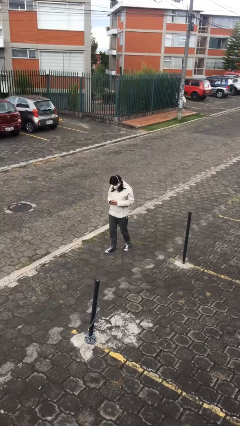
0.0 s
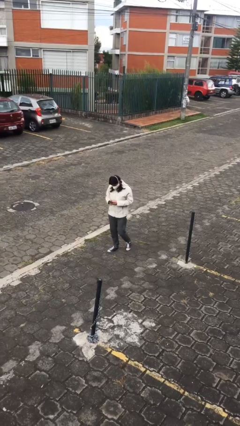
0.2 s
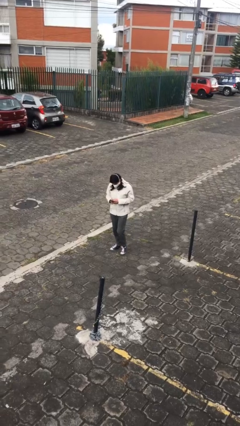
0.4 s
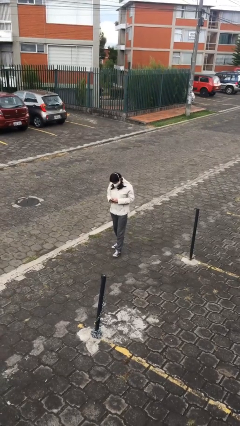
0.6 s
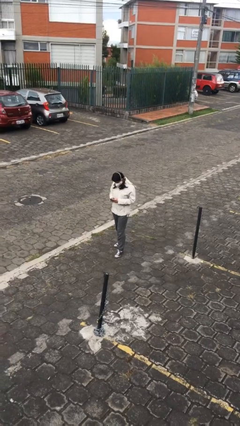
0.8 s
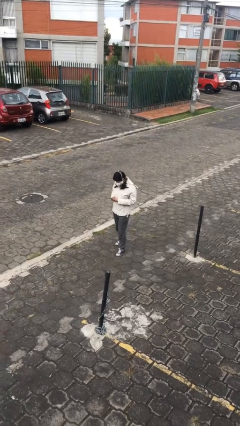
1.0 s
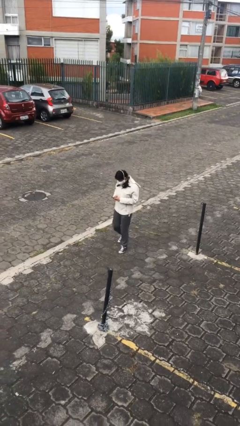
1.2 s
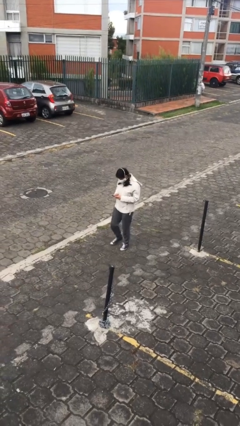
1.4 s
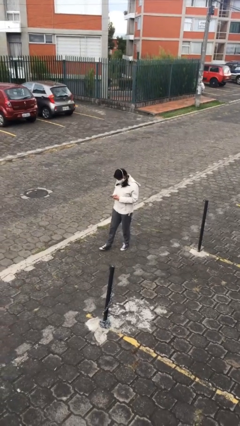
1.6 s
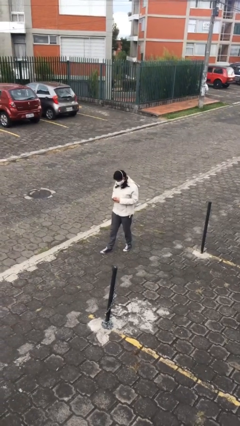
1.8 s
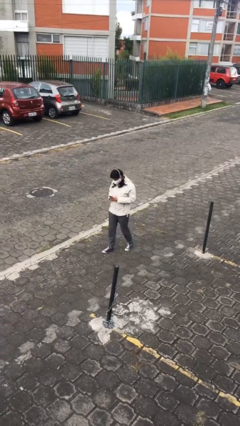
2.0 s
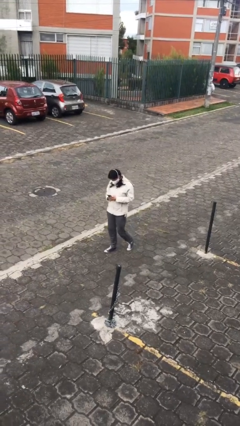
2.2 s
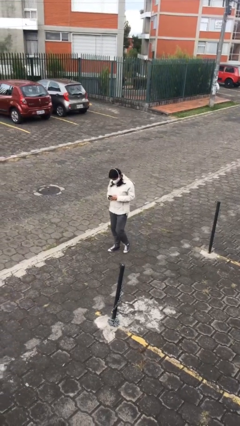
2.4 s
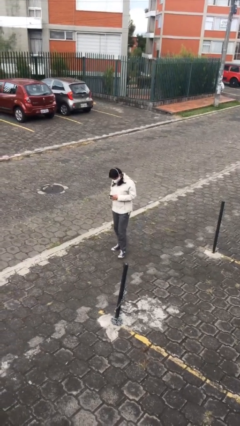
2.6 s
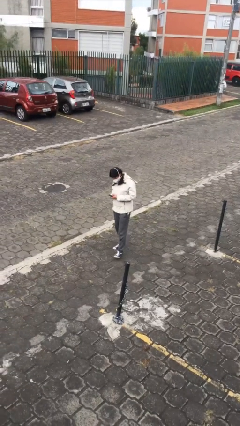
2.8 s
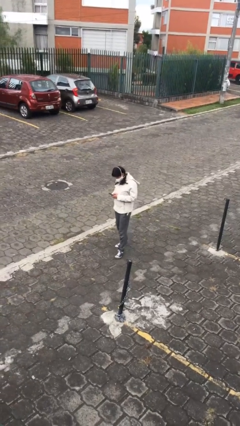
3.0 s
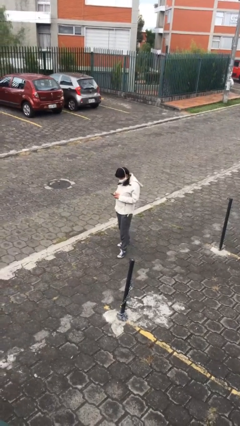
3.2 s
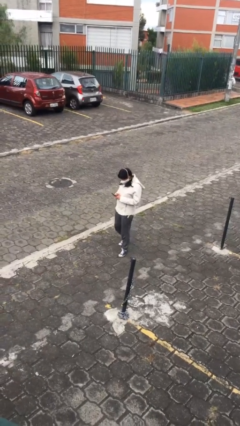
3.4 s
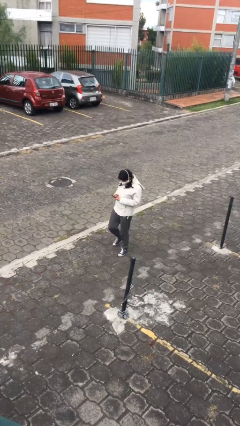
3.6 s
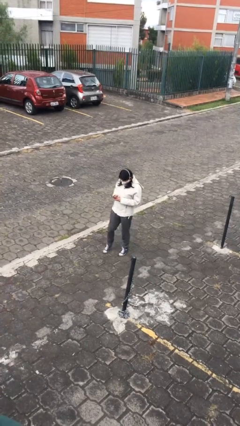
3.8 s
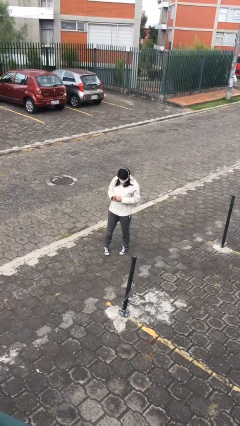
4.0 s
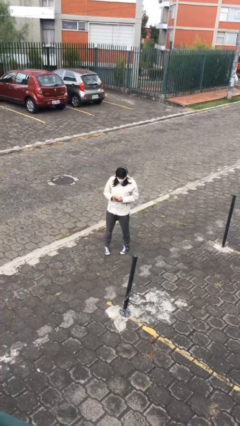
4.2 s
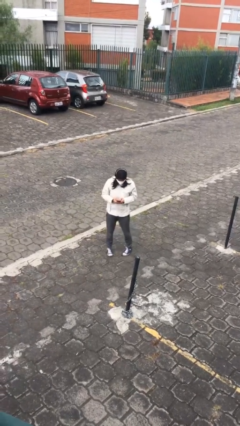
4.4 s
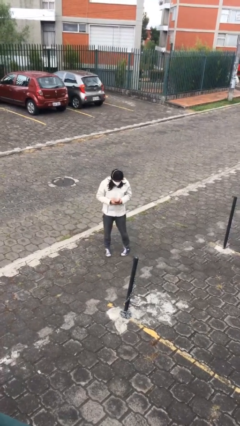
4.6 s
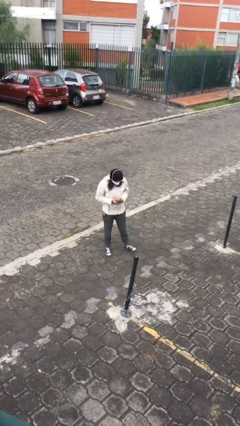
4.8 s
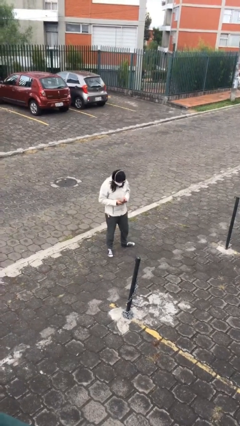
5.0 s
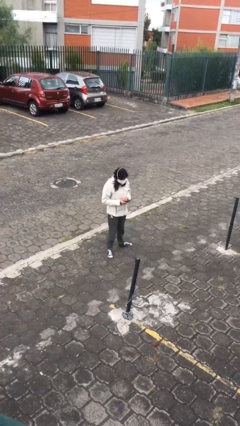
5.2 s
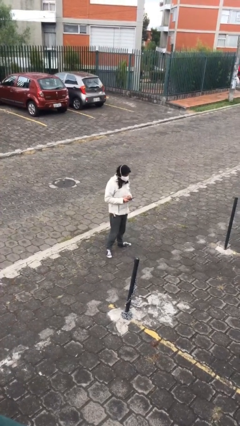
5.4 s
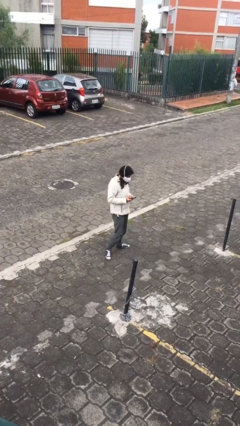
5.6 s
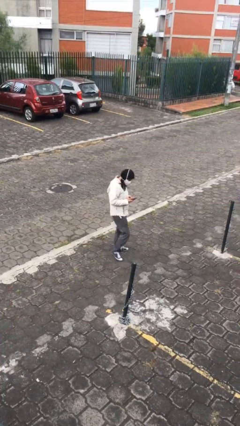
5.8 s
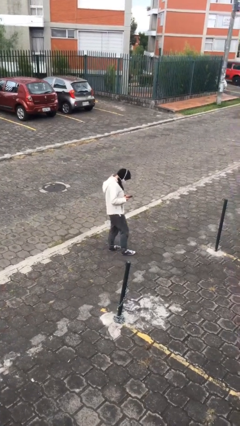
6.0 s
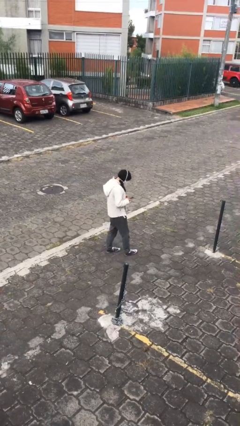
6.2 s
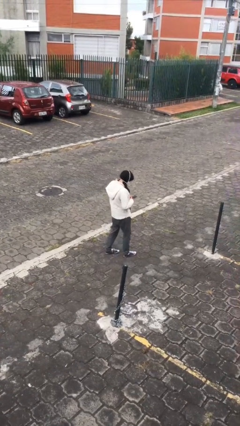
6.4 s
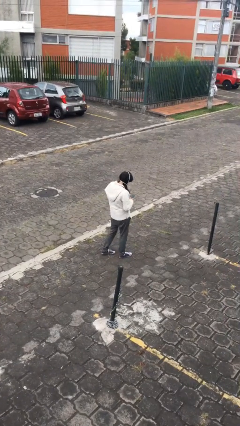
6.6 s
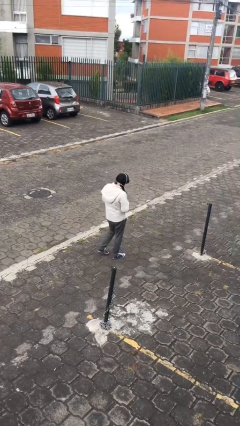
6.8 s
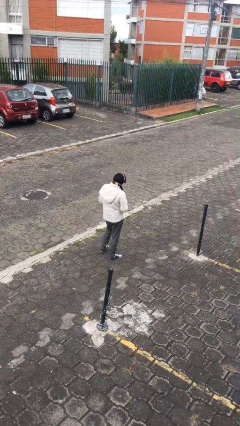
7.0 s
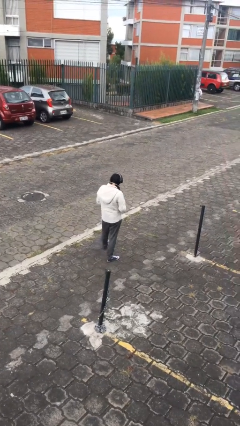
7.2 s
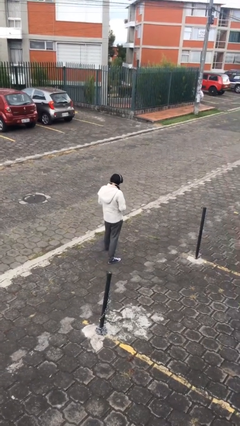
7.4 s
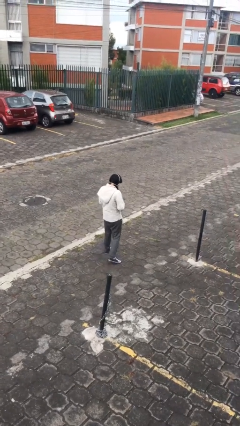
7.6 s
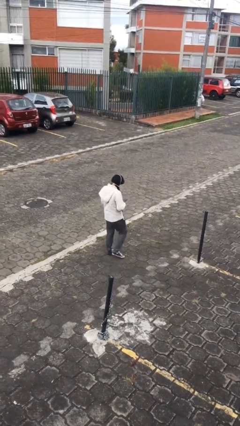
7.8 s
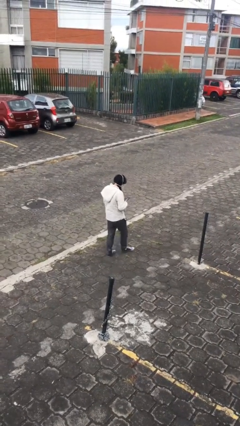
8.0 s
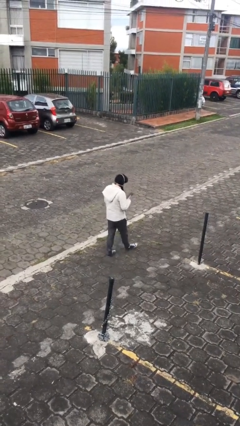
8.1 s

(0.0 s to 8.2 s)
person texts on phone

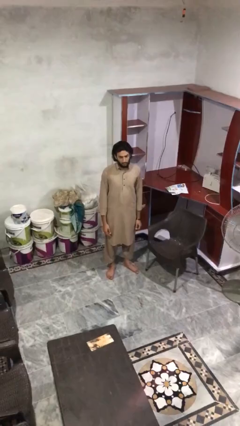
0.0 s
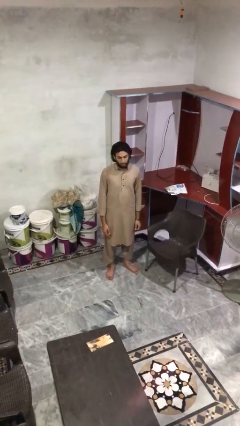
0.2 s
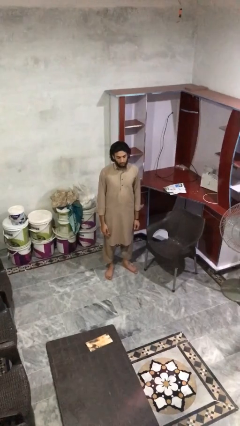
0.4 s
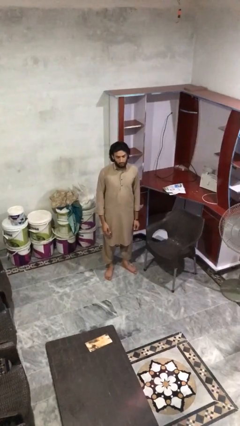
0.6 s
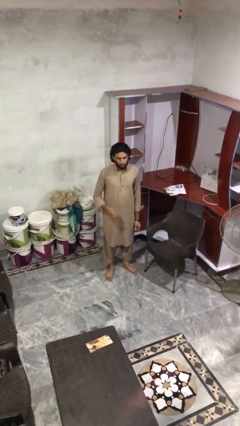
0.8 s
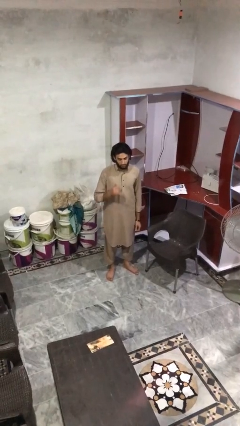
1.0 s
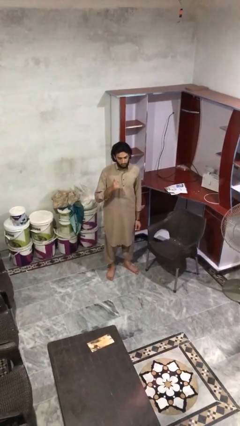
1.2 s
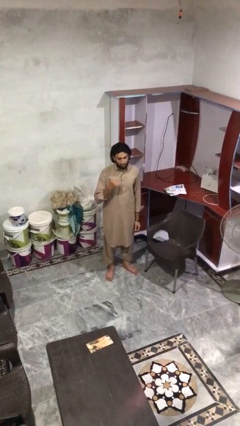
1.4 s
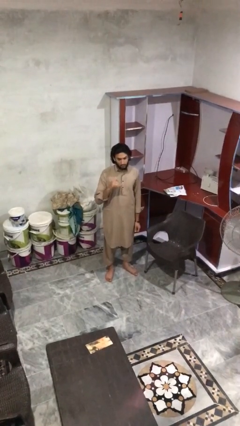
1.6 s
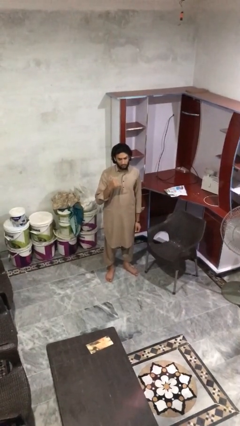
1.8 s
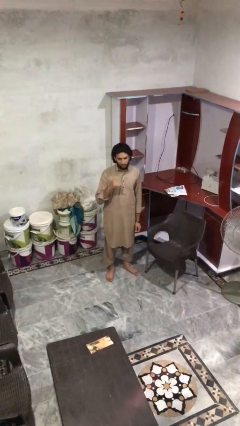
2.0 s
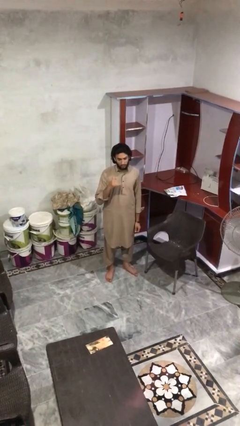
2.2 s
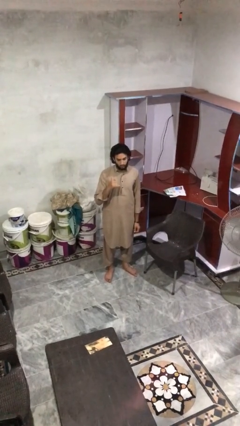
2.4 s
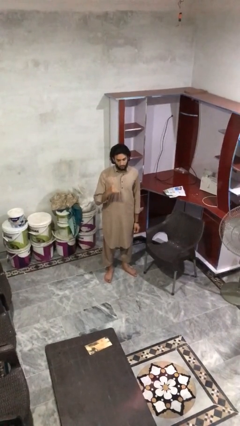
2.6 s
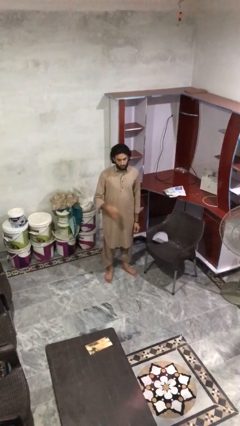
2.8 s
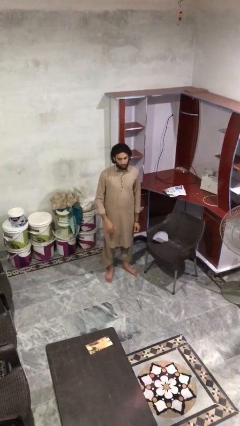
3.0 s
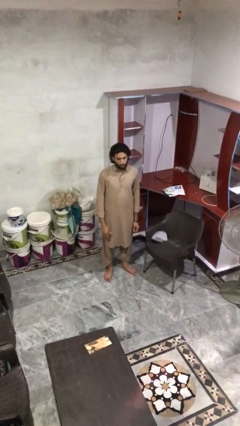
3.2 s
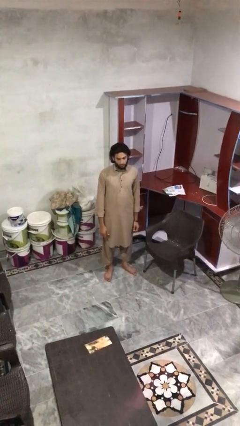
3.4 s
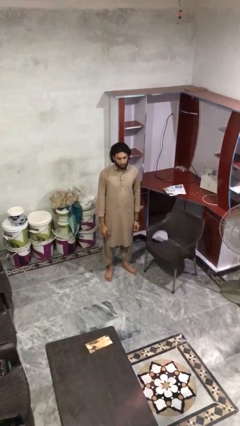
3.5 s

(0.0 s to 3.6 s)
person gestures hang loose

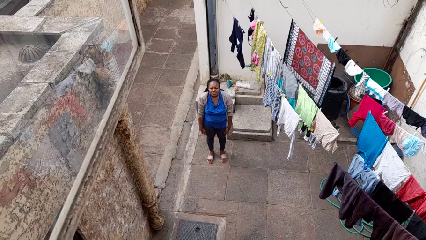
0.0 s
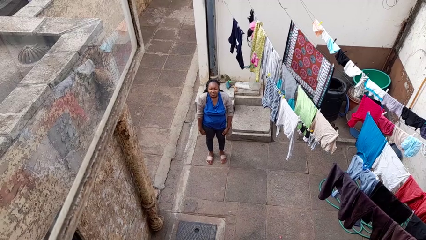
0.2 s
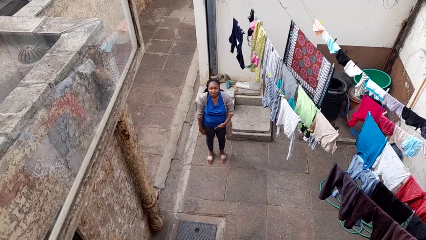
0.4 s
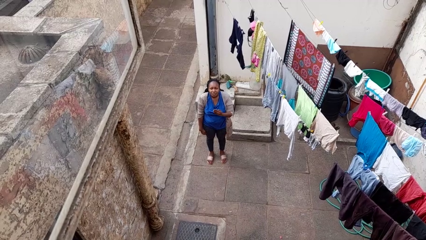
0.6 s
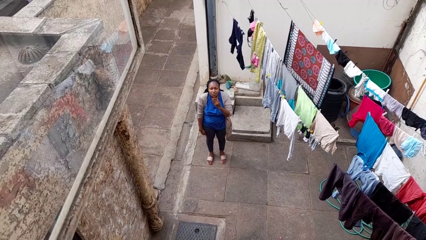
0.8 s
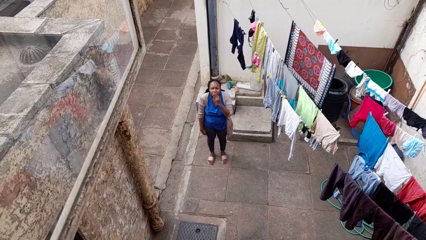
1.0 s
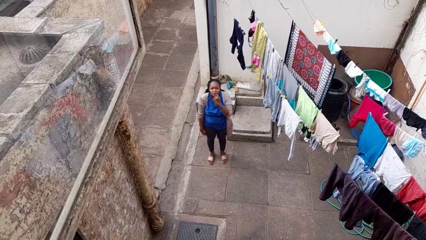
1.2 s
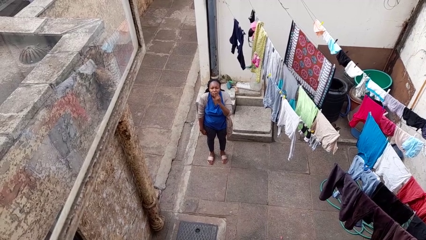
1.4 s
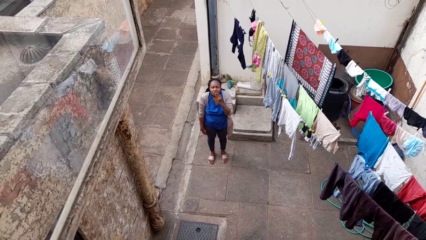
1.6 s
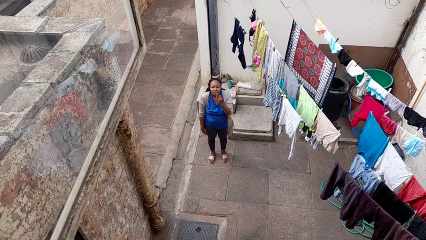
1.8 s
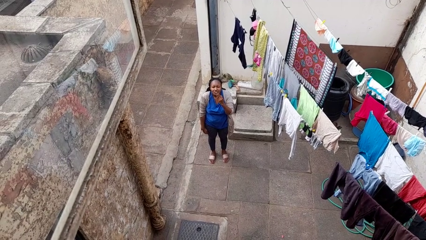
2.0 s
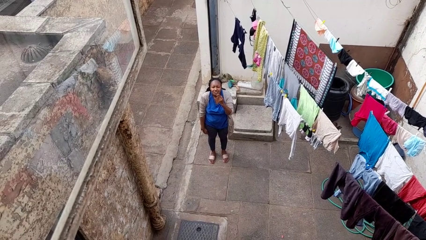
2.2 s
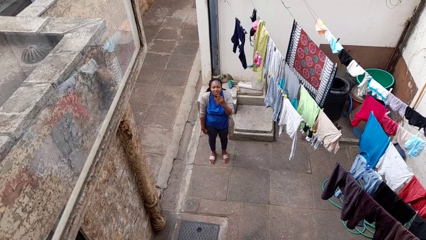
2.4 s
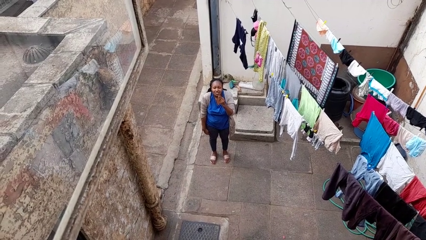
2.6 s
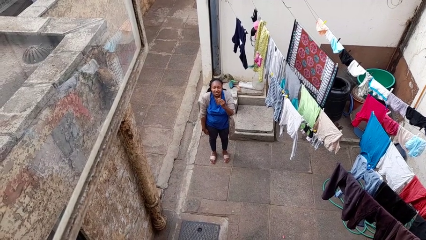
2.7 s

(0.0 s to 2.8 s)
person gestures blow kiss

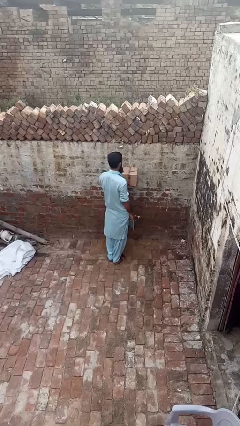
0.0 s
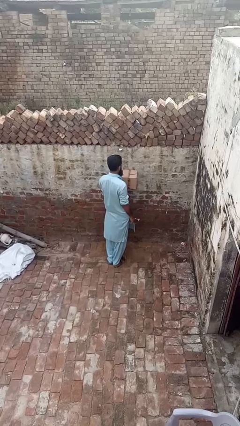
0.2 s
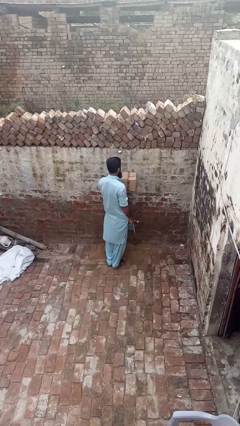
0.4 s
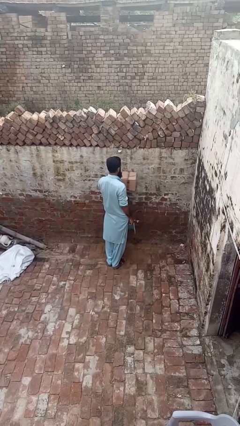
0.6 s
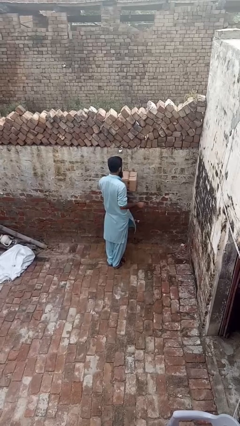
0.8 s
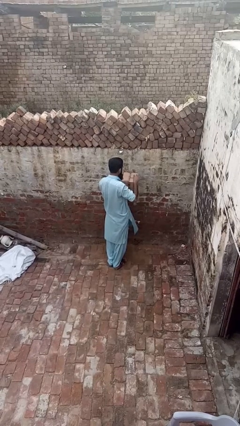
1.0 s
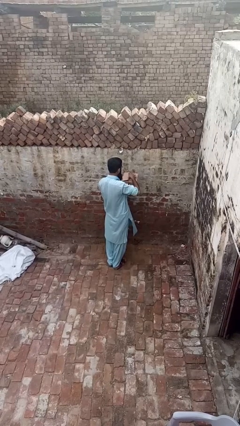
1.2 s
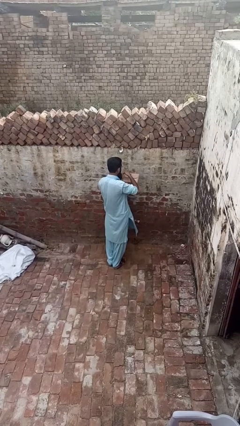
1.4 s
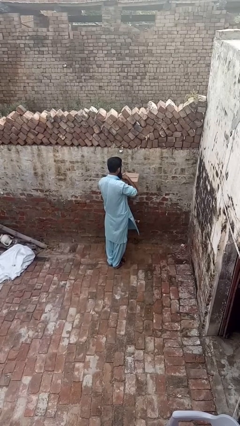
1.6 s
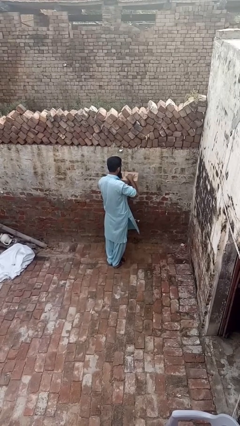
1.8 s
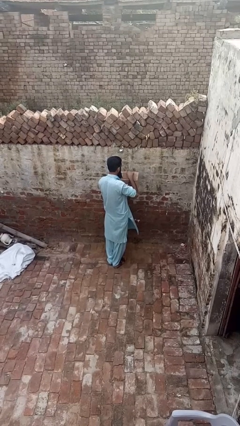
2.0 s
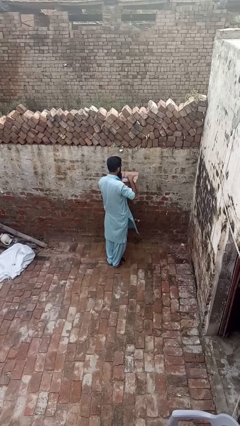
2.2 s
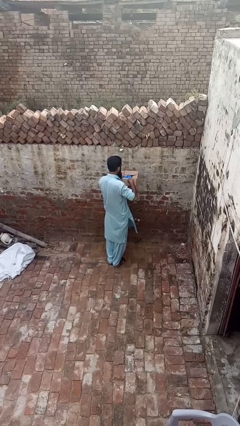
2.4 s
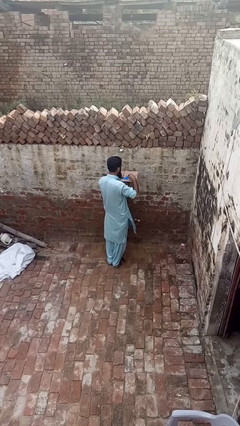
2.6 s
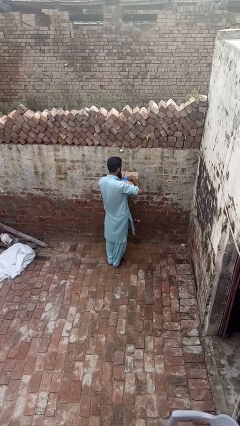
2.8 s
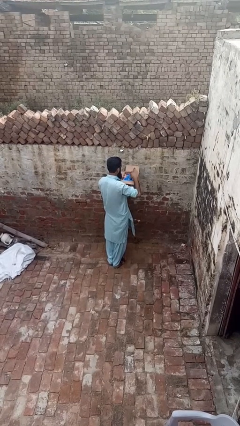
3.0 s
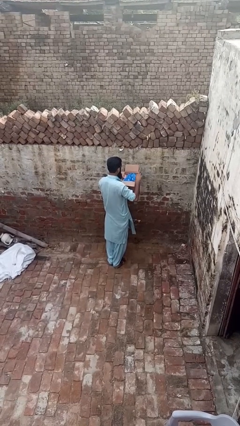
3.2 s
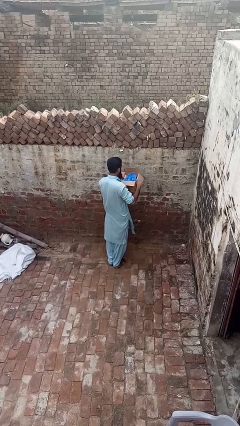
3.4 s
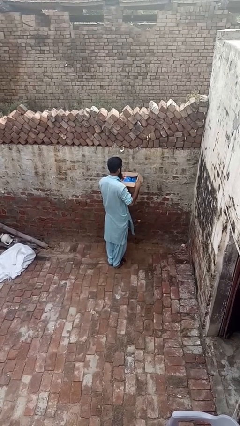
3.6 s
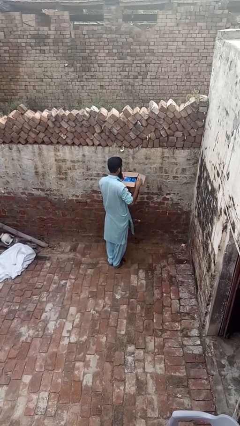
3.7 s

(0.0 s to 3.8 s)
person opens mailbox
